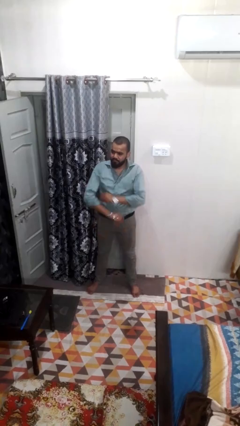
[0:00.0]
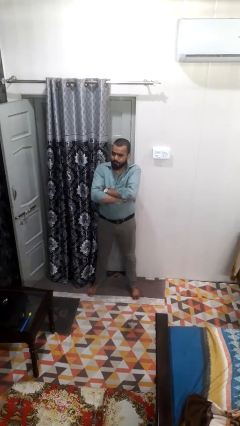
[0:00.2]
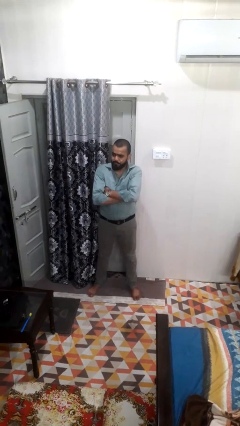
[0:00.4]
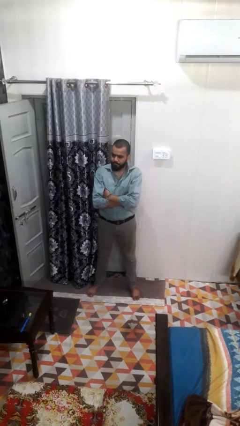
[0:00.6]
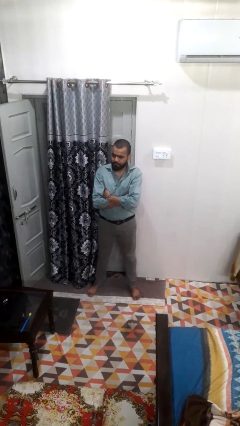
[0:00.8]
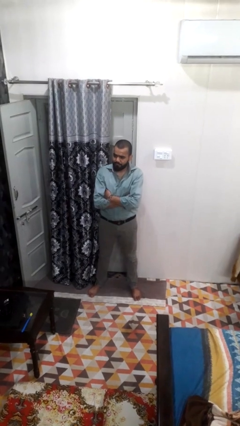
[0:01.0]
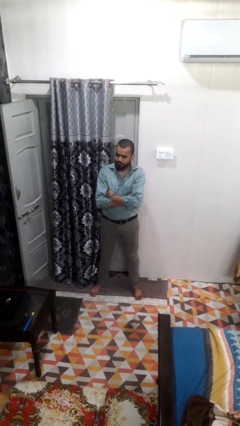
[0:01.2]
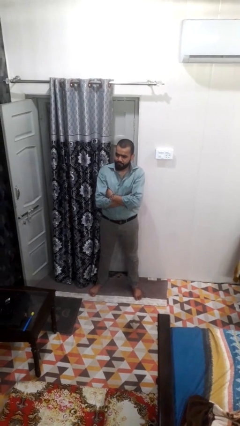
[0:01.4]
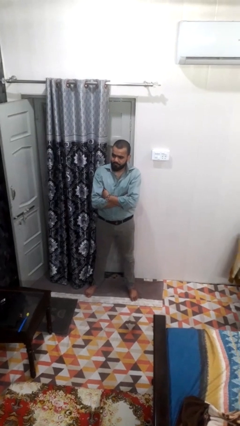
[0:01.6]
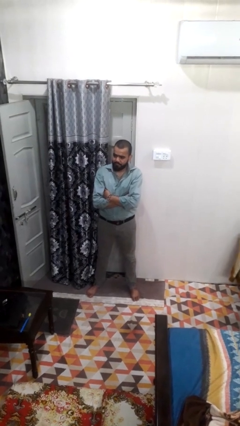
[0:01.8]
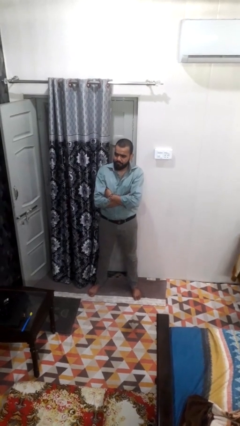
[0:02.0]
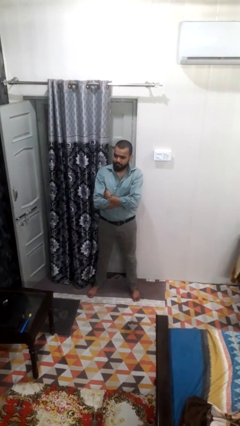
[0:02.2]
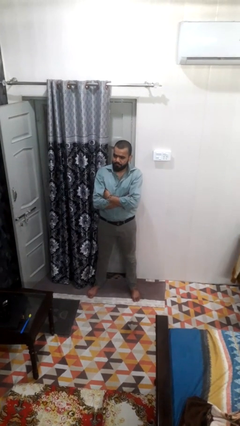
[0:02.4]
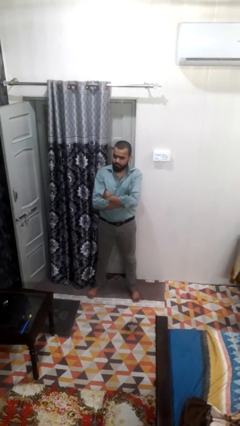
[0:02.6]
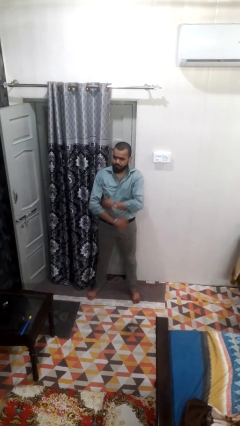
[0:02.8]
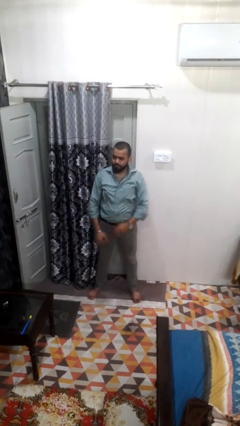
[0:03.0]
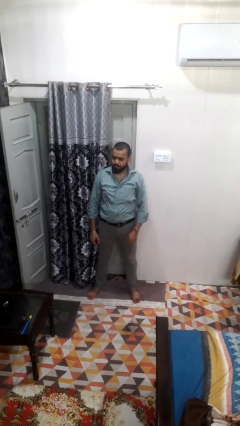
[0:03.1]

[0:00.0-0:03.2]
person crosses arms

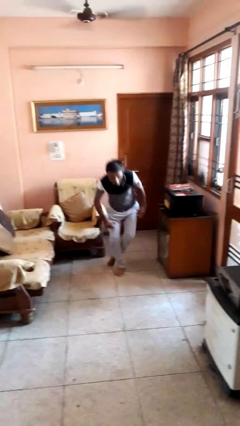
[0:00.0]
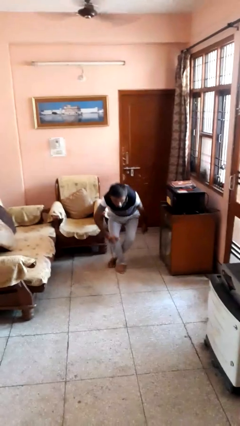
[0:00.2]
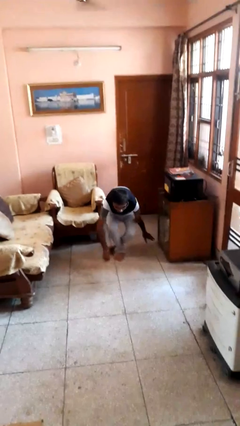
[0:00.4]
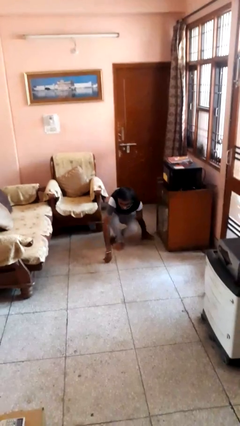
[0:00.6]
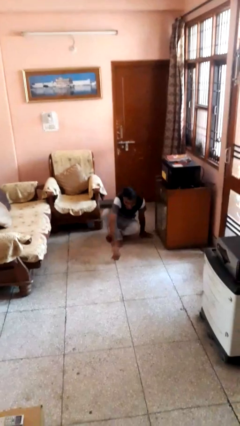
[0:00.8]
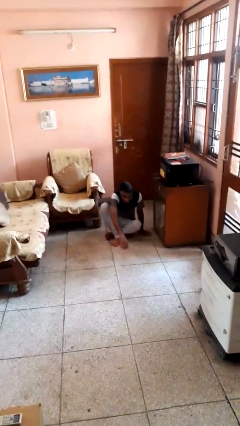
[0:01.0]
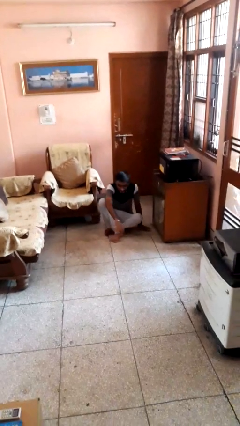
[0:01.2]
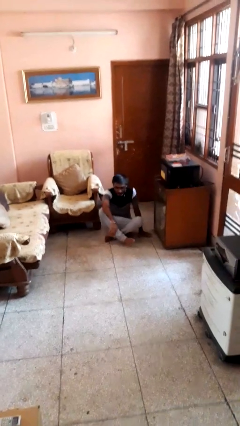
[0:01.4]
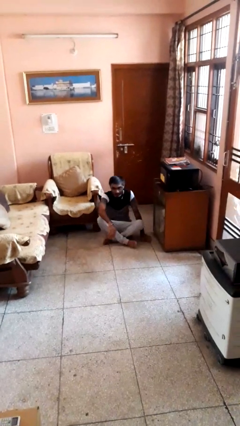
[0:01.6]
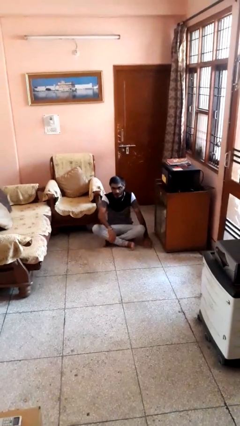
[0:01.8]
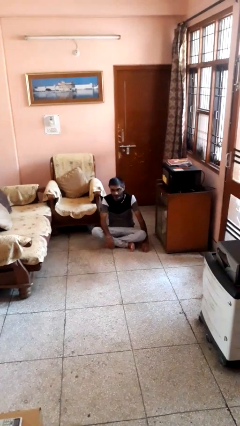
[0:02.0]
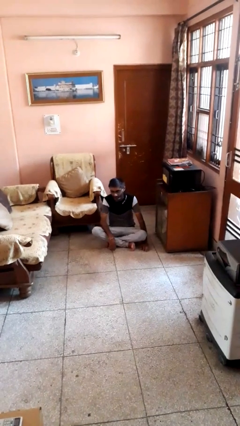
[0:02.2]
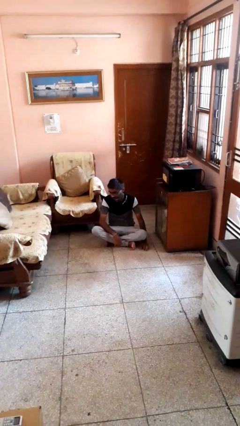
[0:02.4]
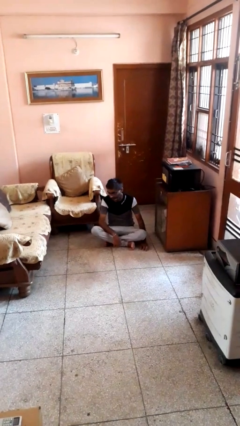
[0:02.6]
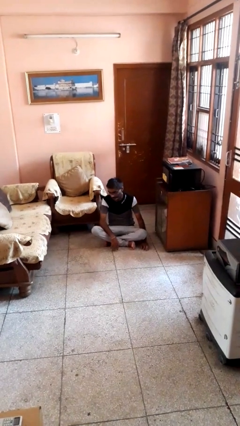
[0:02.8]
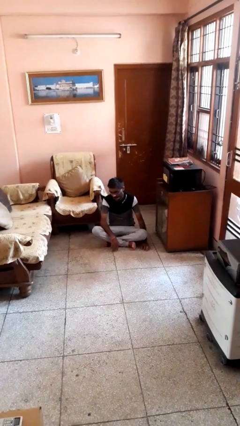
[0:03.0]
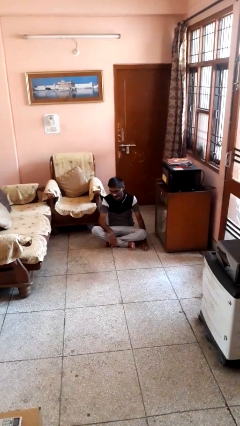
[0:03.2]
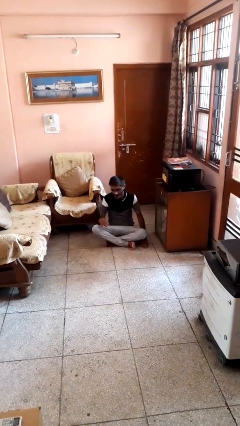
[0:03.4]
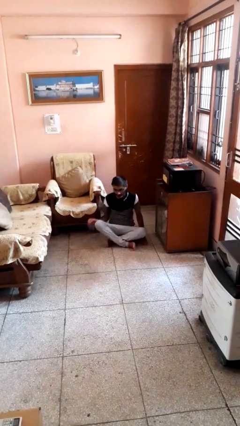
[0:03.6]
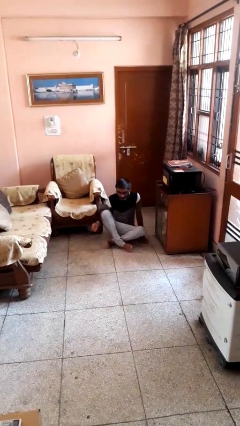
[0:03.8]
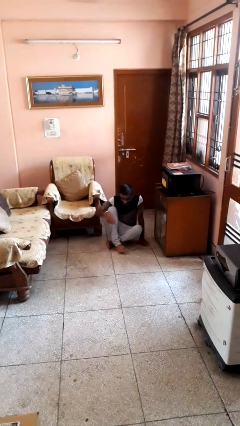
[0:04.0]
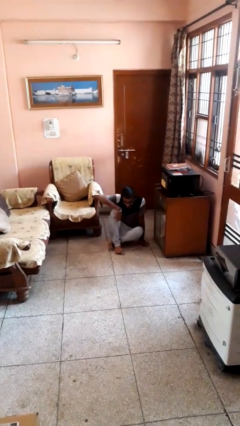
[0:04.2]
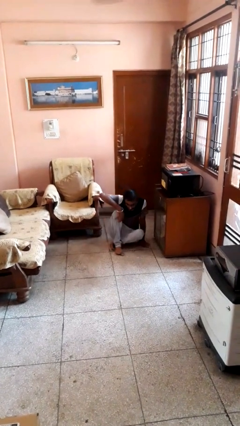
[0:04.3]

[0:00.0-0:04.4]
person sits crisscross

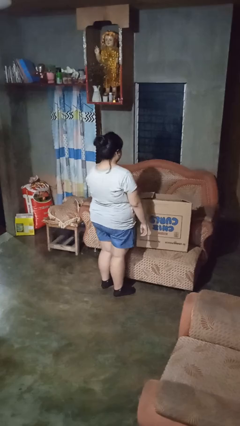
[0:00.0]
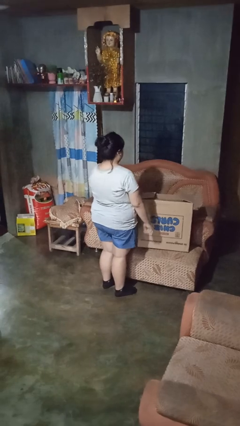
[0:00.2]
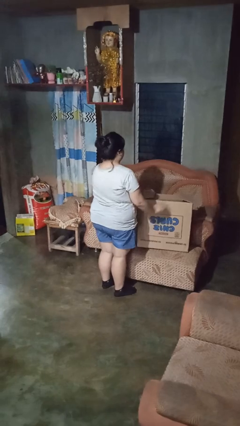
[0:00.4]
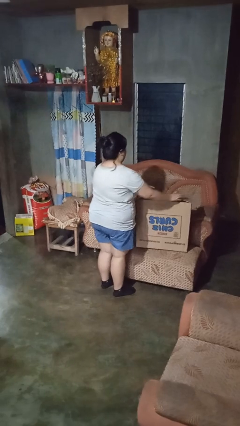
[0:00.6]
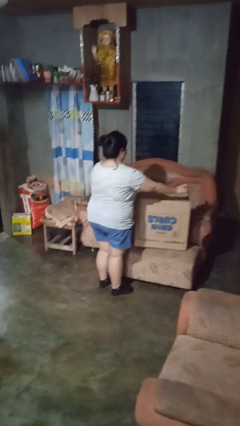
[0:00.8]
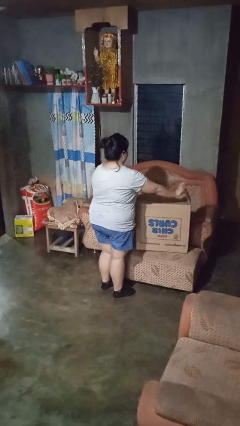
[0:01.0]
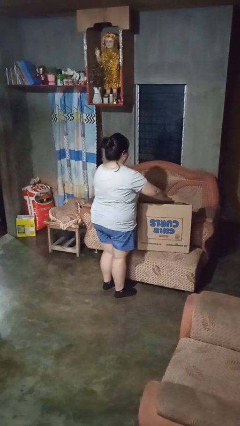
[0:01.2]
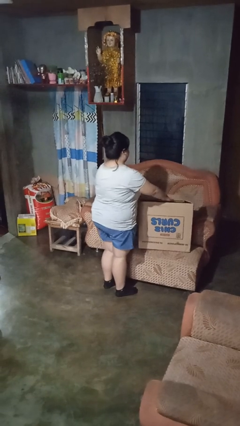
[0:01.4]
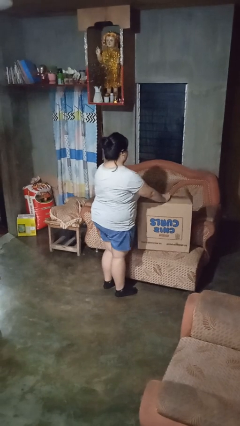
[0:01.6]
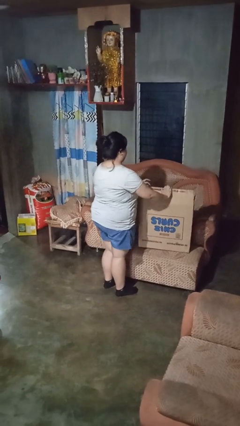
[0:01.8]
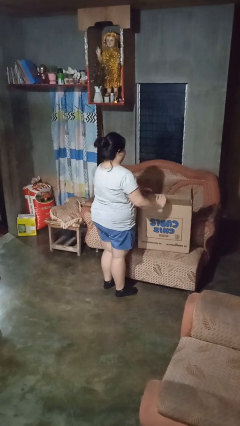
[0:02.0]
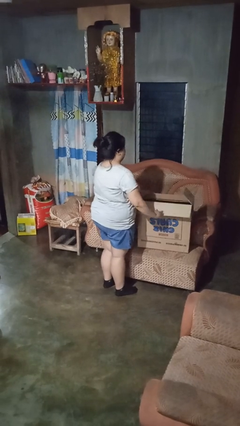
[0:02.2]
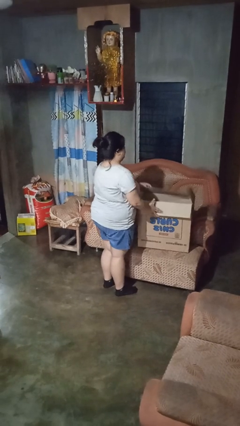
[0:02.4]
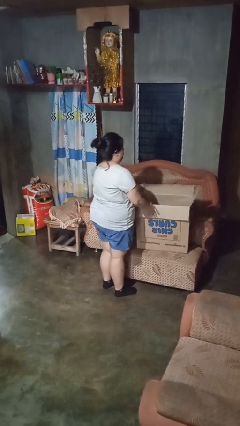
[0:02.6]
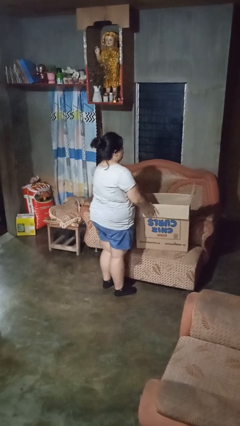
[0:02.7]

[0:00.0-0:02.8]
person opens box

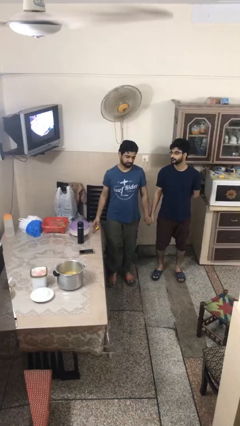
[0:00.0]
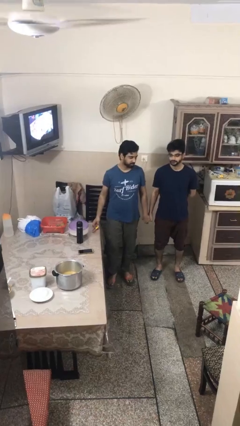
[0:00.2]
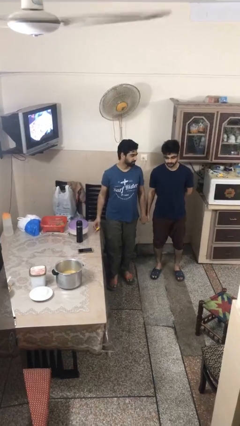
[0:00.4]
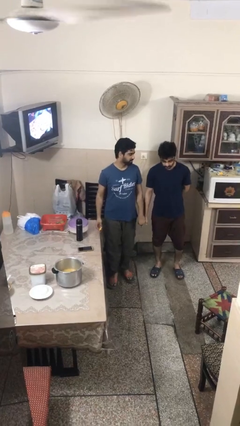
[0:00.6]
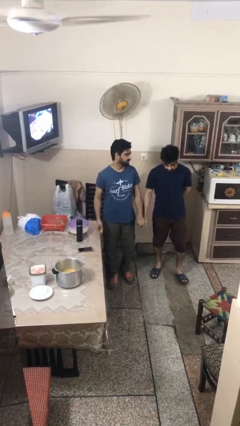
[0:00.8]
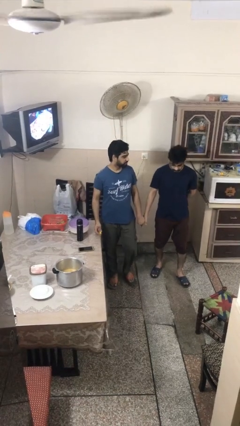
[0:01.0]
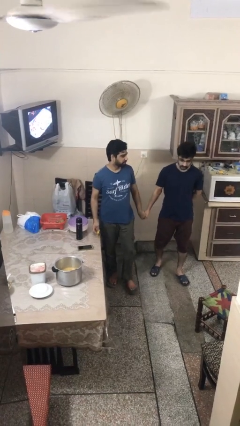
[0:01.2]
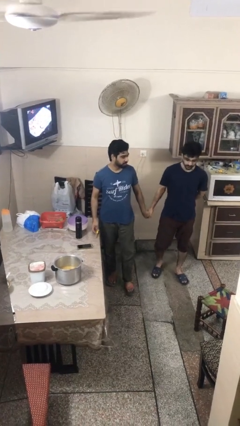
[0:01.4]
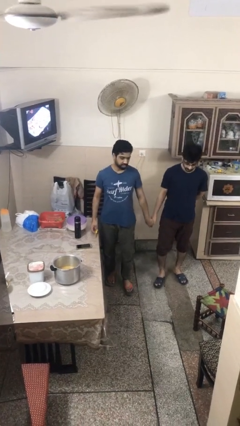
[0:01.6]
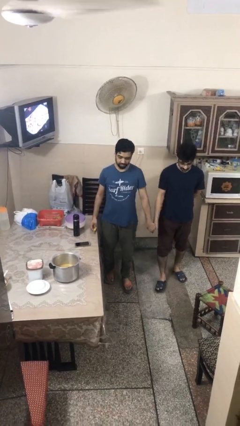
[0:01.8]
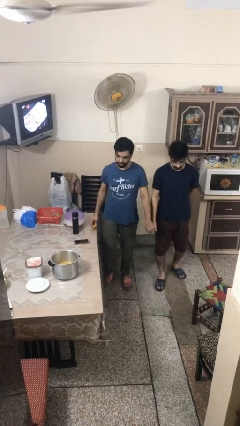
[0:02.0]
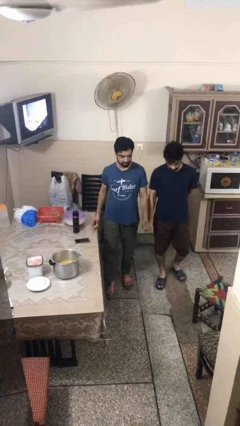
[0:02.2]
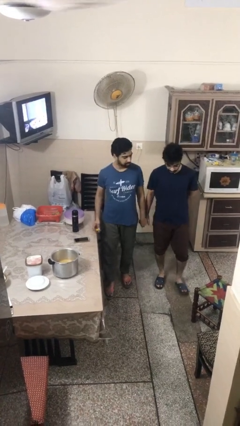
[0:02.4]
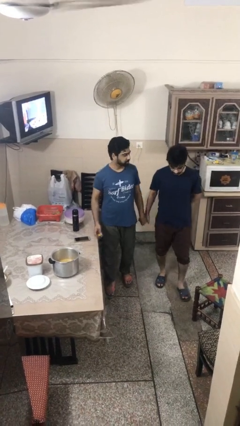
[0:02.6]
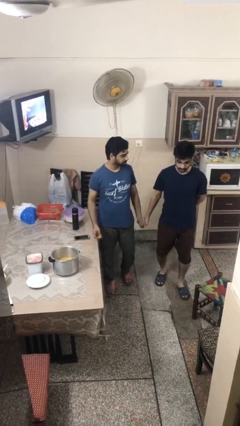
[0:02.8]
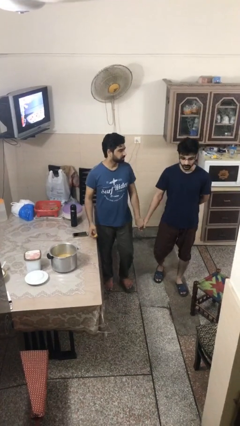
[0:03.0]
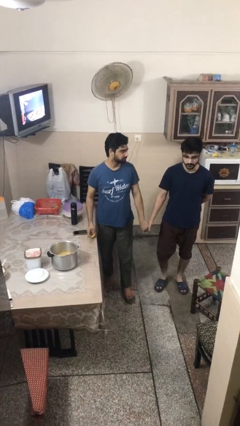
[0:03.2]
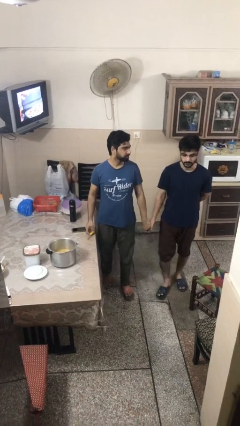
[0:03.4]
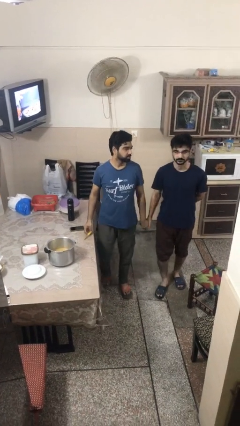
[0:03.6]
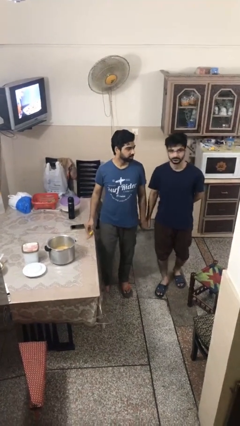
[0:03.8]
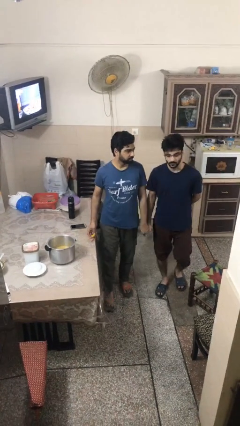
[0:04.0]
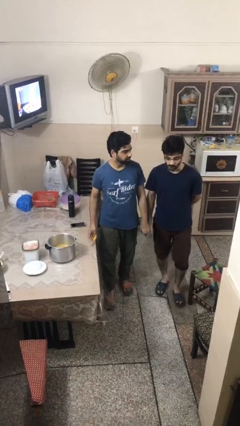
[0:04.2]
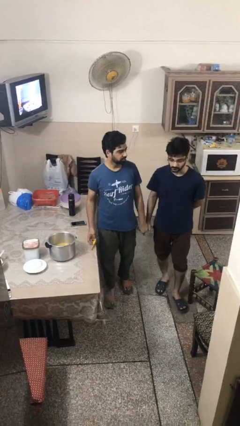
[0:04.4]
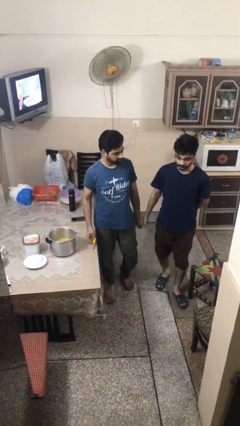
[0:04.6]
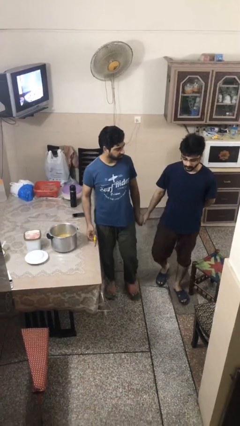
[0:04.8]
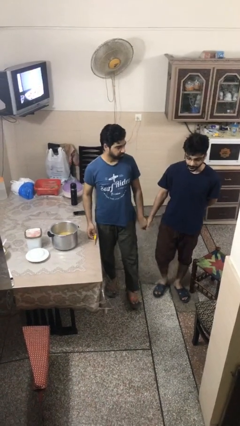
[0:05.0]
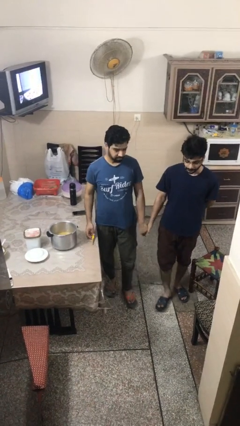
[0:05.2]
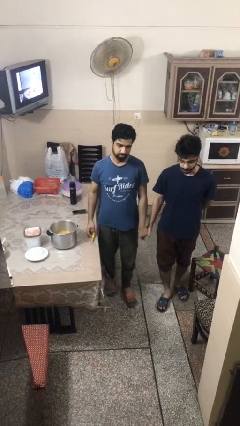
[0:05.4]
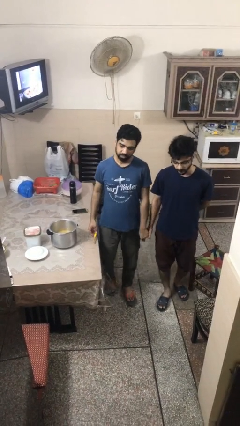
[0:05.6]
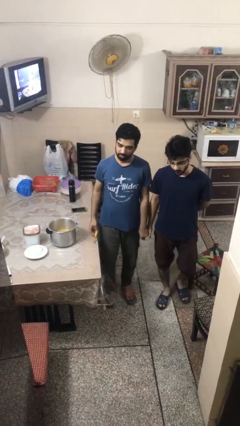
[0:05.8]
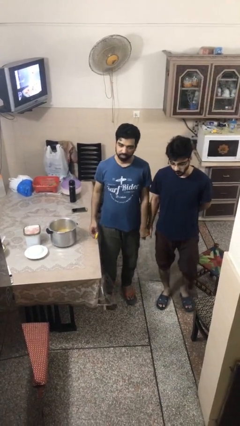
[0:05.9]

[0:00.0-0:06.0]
person holds hand

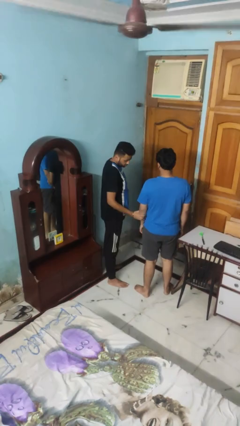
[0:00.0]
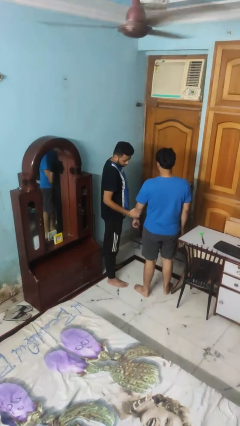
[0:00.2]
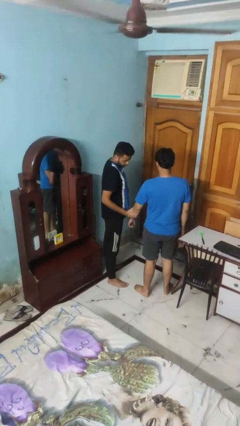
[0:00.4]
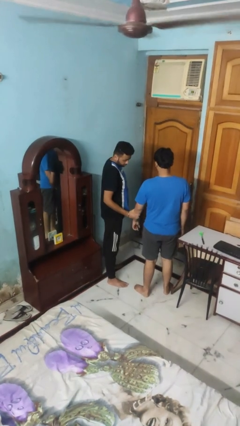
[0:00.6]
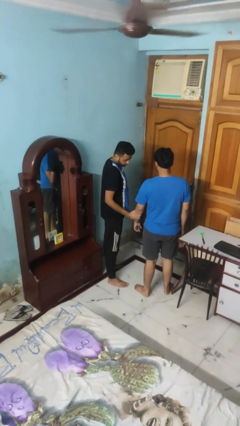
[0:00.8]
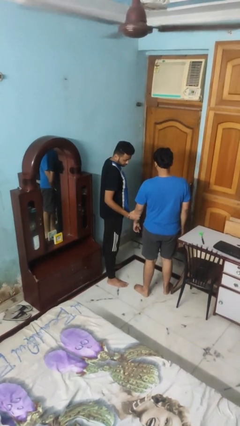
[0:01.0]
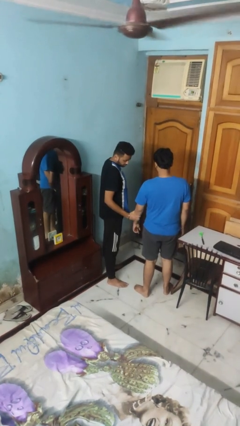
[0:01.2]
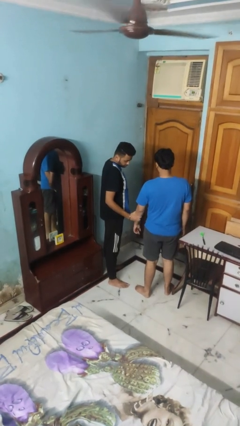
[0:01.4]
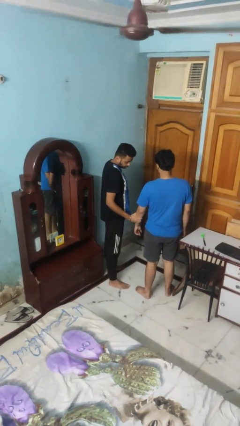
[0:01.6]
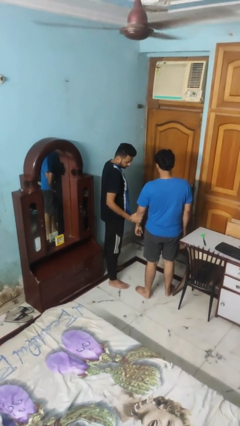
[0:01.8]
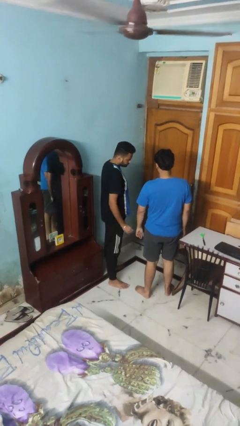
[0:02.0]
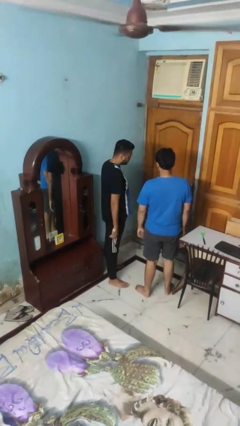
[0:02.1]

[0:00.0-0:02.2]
person grabs person by forearm
